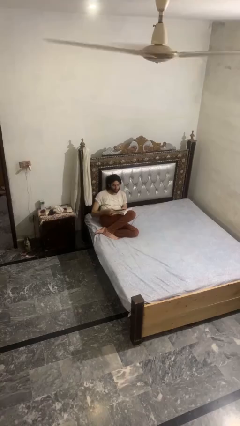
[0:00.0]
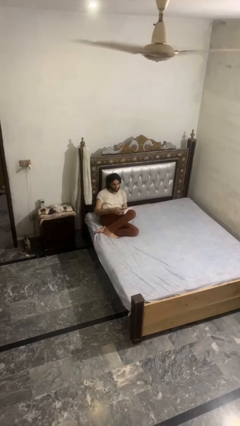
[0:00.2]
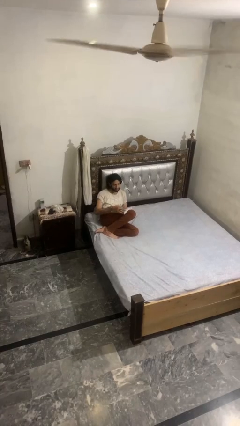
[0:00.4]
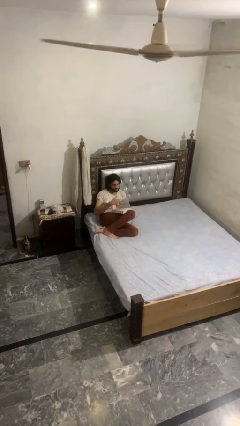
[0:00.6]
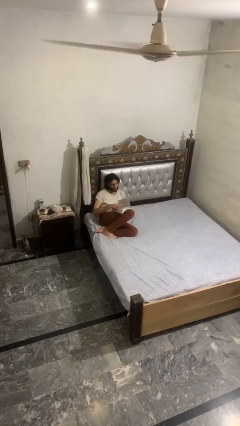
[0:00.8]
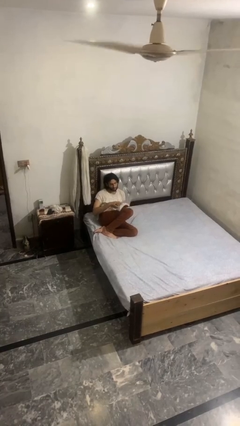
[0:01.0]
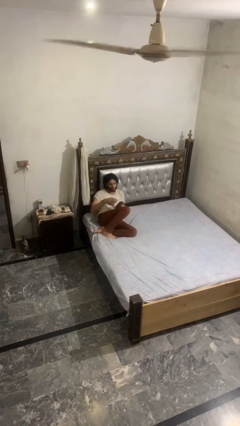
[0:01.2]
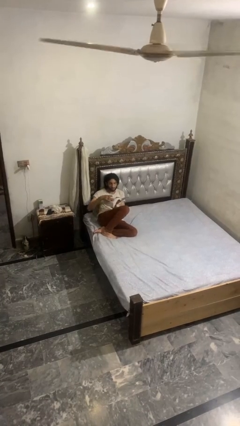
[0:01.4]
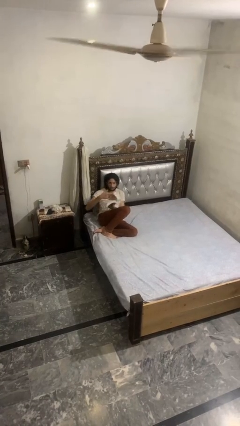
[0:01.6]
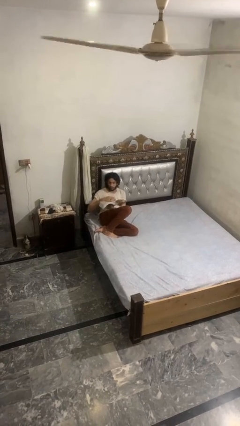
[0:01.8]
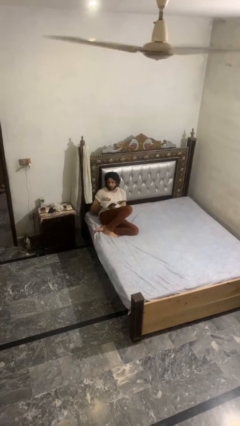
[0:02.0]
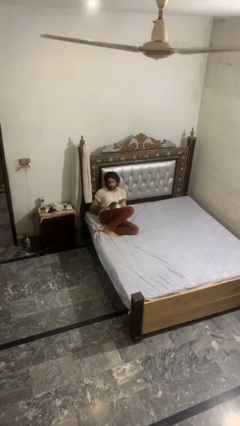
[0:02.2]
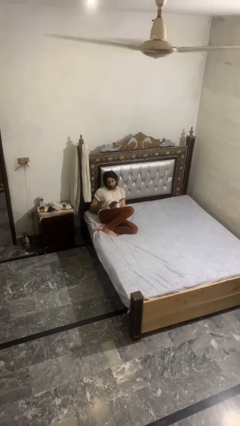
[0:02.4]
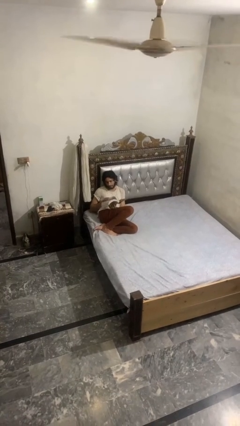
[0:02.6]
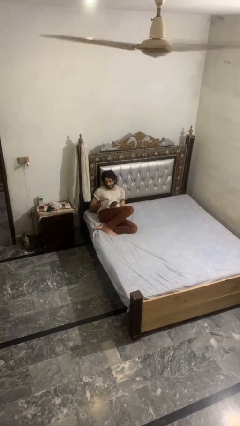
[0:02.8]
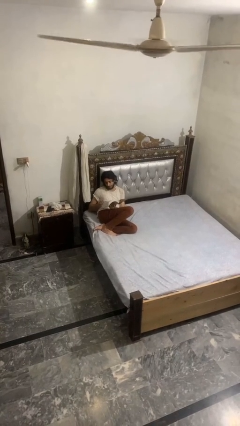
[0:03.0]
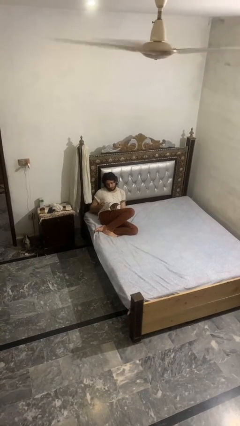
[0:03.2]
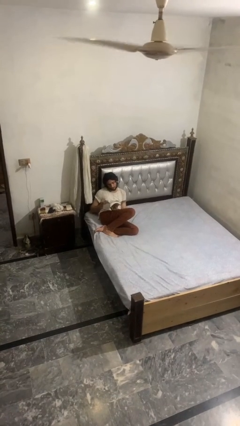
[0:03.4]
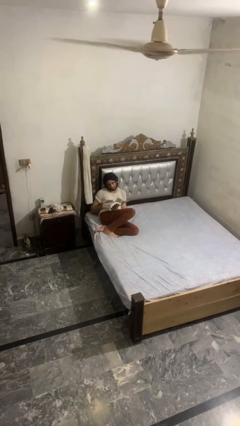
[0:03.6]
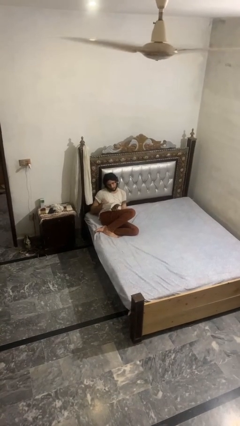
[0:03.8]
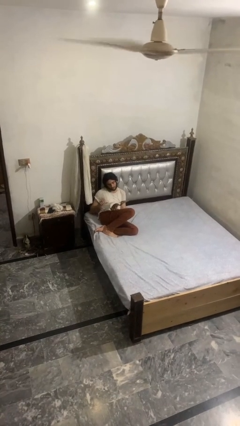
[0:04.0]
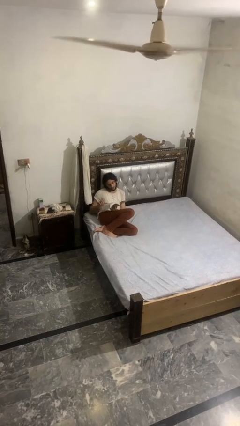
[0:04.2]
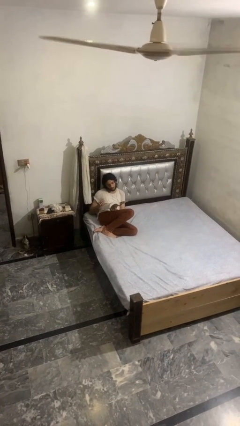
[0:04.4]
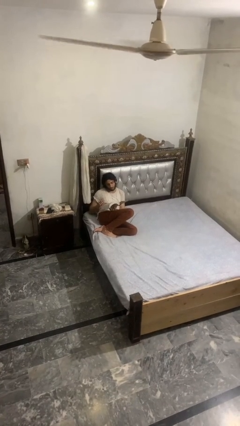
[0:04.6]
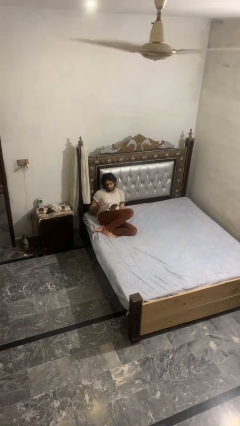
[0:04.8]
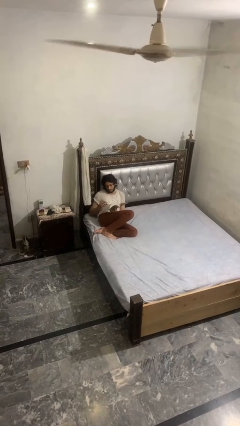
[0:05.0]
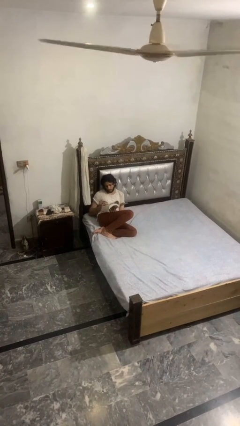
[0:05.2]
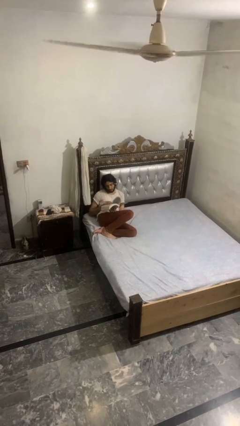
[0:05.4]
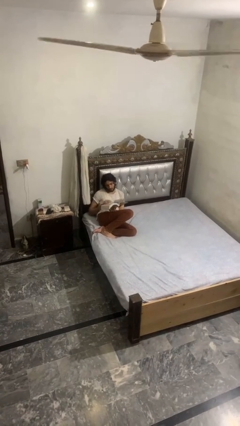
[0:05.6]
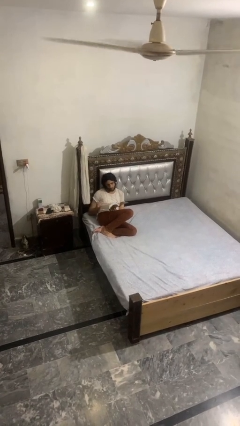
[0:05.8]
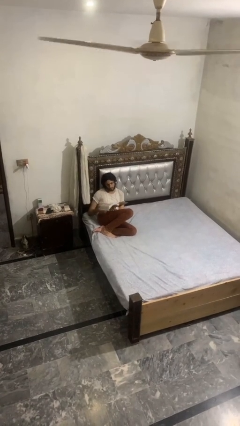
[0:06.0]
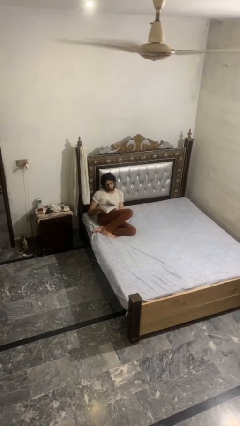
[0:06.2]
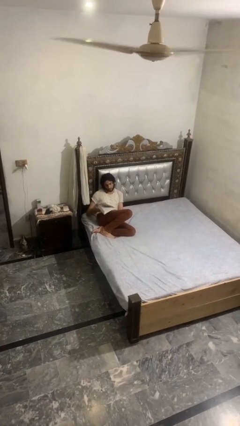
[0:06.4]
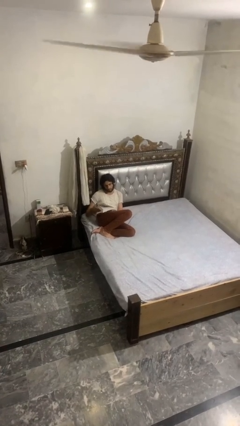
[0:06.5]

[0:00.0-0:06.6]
person reads book

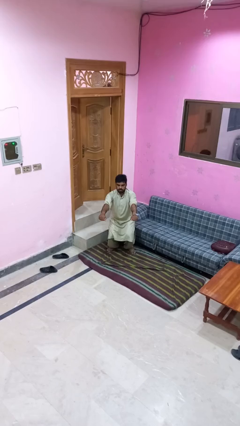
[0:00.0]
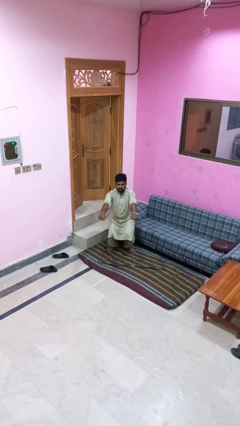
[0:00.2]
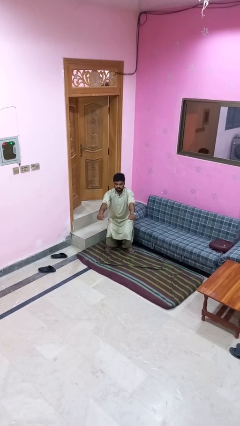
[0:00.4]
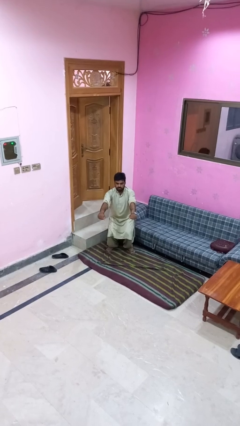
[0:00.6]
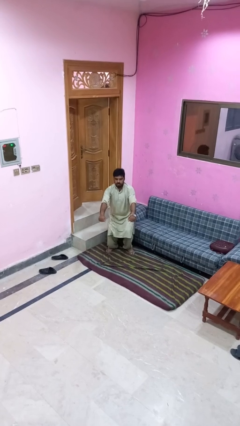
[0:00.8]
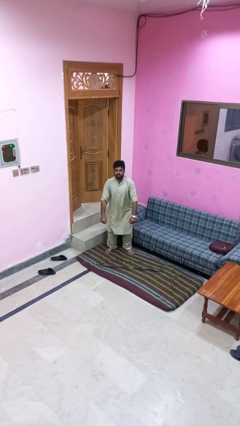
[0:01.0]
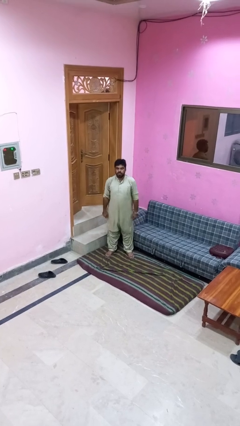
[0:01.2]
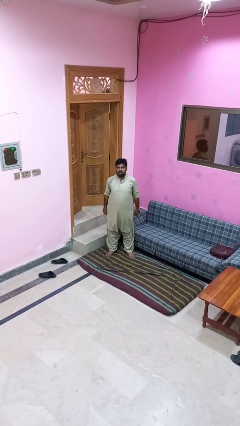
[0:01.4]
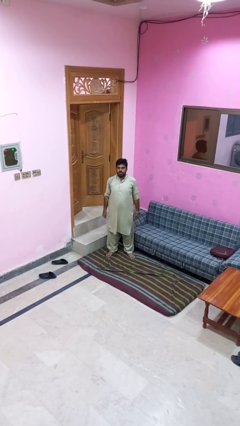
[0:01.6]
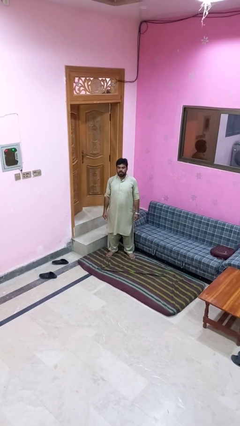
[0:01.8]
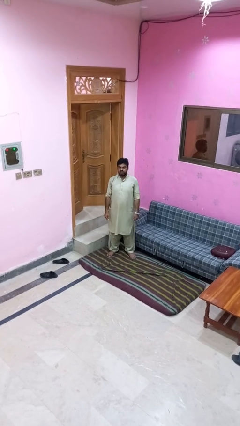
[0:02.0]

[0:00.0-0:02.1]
person stands up

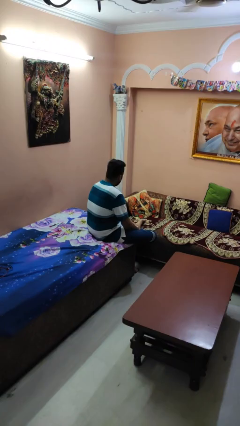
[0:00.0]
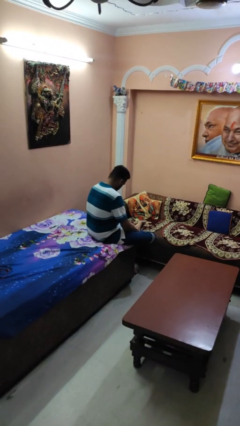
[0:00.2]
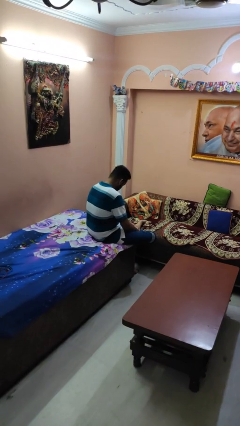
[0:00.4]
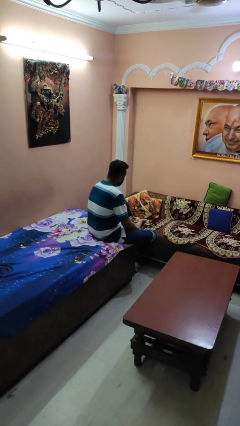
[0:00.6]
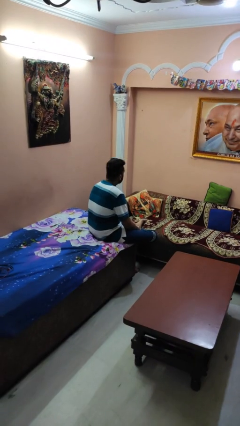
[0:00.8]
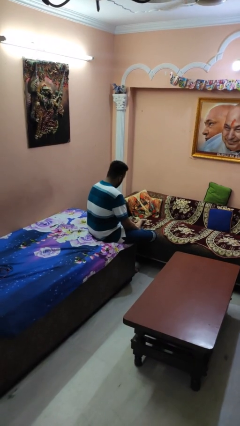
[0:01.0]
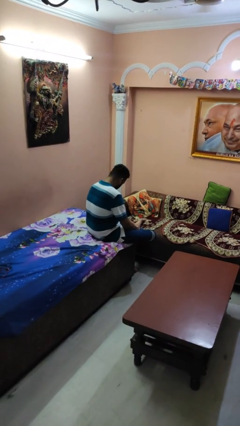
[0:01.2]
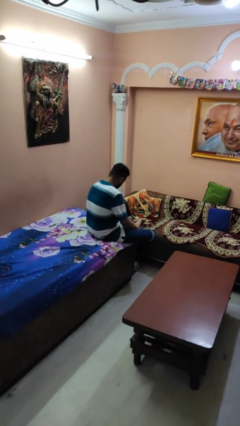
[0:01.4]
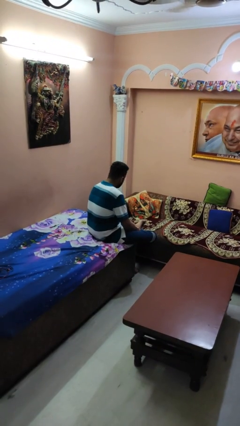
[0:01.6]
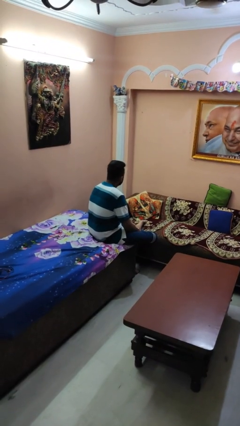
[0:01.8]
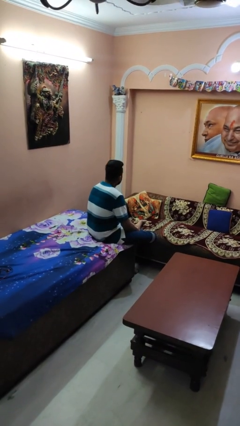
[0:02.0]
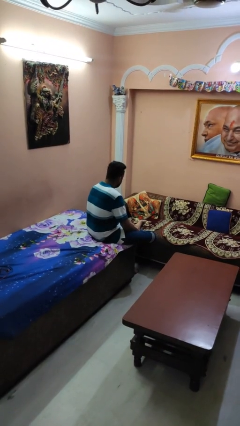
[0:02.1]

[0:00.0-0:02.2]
person nods head

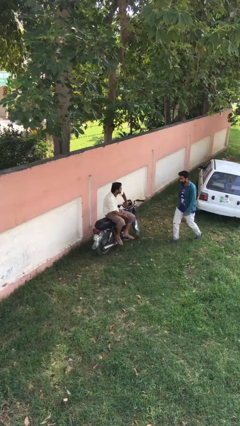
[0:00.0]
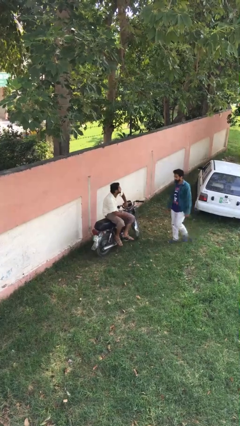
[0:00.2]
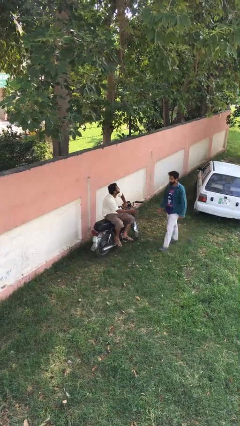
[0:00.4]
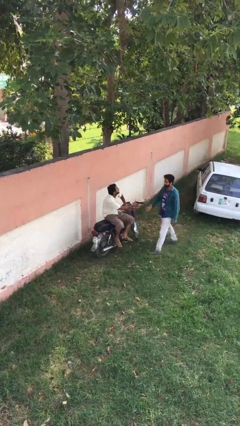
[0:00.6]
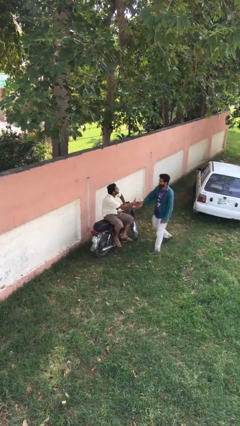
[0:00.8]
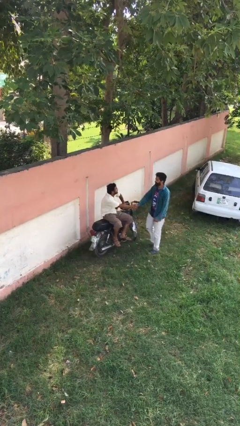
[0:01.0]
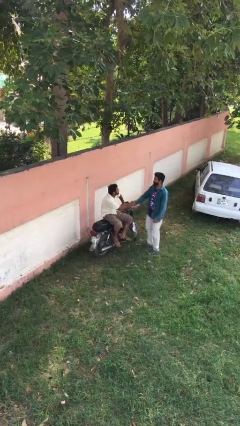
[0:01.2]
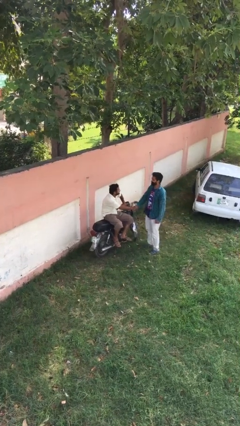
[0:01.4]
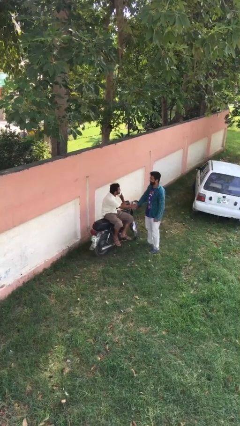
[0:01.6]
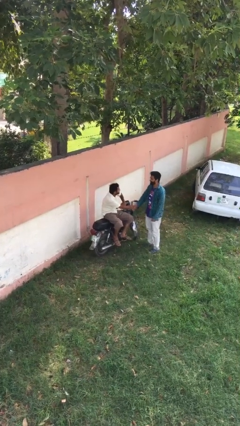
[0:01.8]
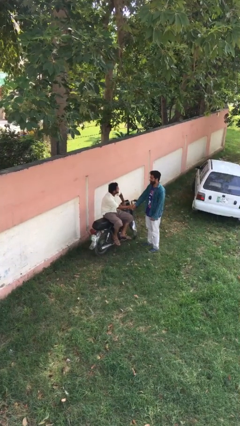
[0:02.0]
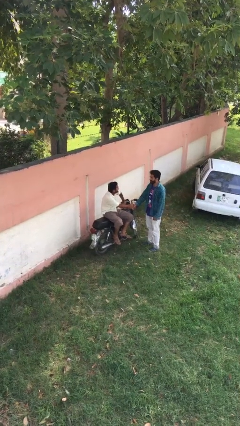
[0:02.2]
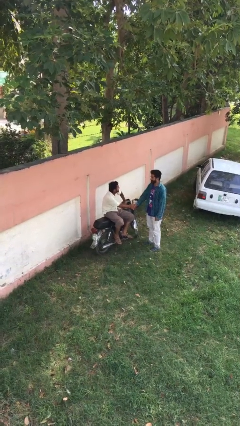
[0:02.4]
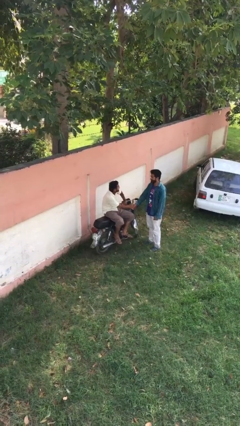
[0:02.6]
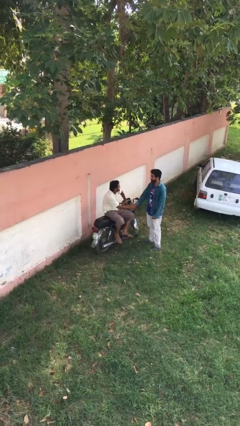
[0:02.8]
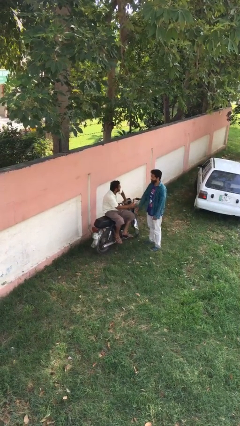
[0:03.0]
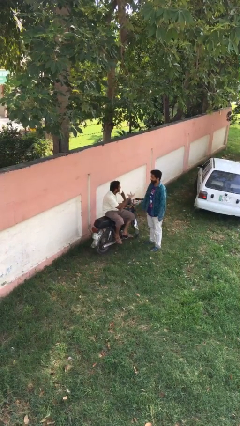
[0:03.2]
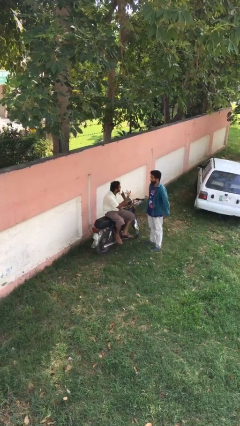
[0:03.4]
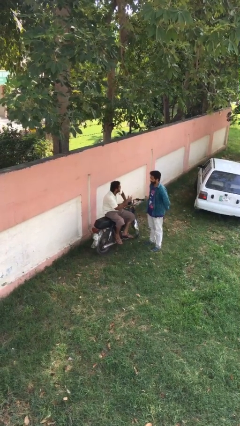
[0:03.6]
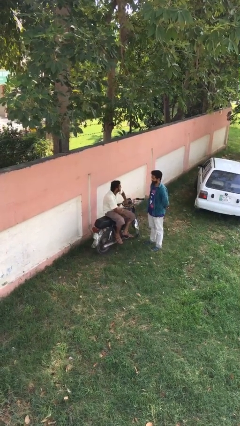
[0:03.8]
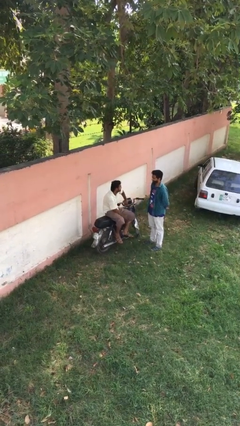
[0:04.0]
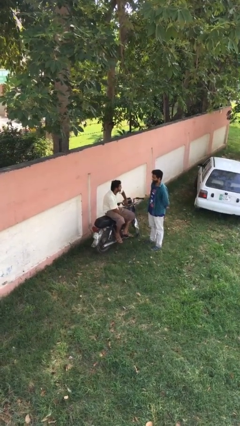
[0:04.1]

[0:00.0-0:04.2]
person shakes hand

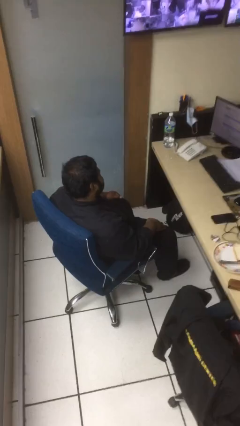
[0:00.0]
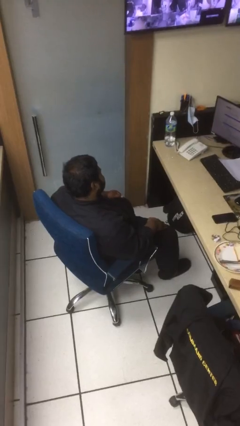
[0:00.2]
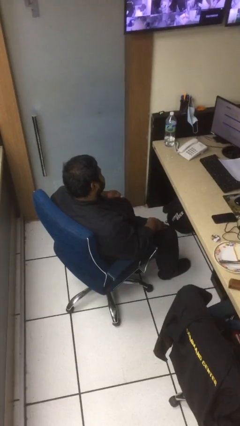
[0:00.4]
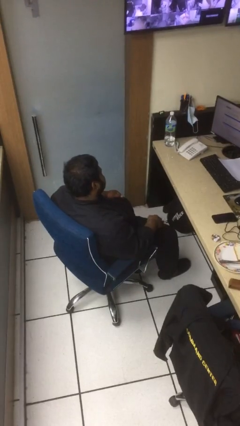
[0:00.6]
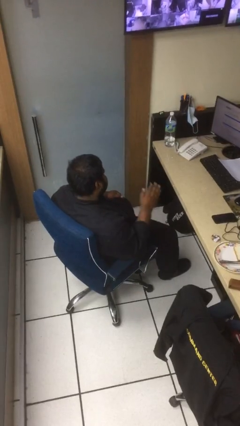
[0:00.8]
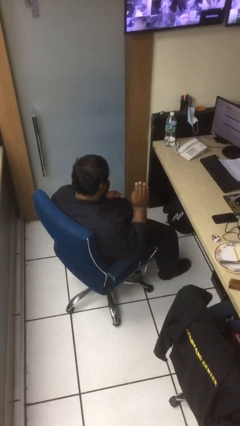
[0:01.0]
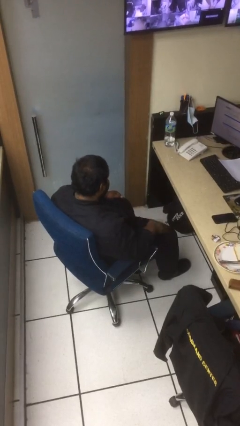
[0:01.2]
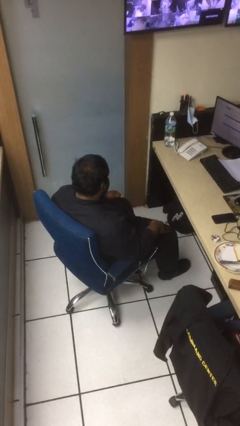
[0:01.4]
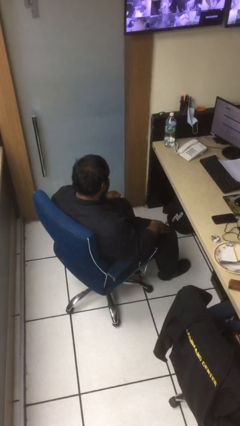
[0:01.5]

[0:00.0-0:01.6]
person slaps hands on thighs

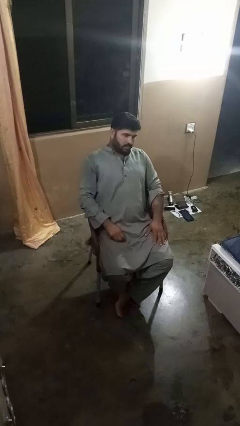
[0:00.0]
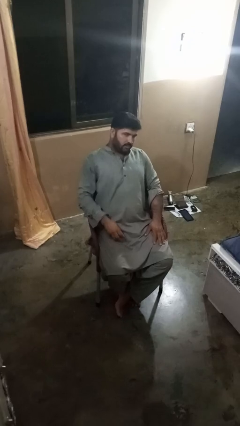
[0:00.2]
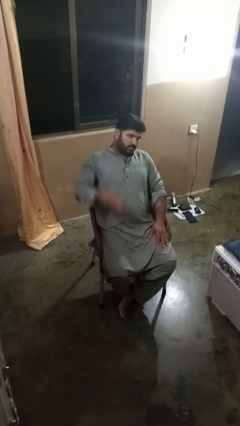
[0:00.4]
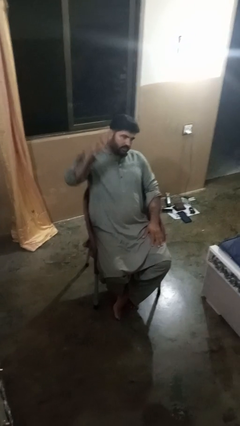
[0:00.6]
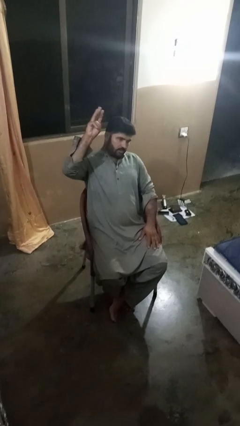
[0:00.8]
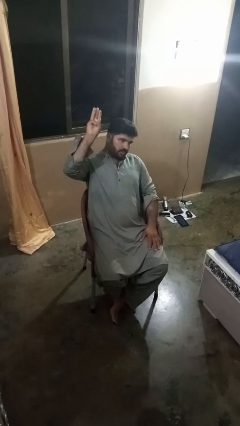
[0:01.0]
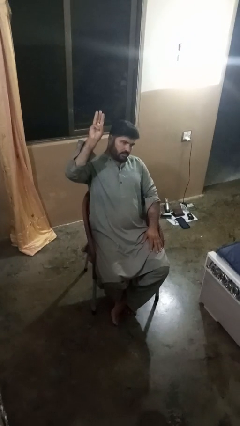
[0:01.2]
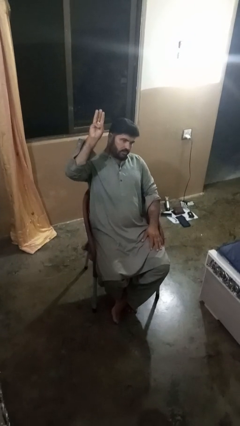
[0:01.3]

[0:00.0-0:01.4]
person gestures number three
